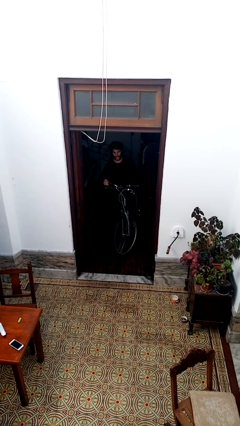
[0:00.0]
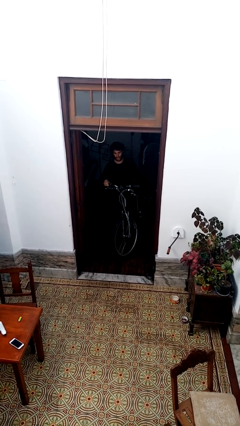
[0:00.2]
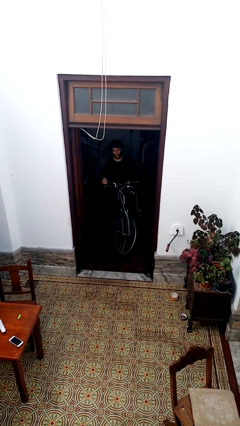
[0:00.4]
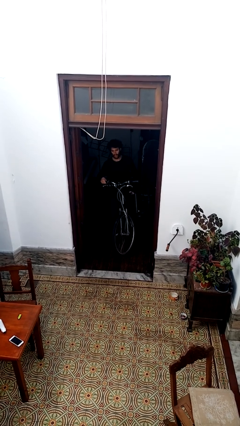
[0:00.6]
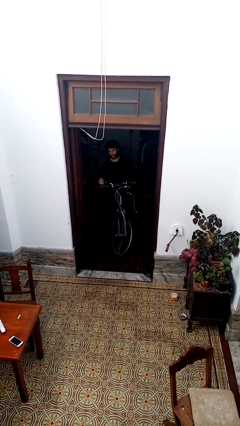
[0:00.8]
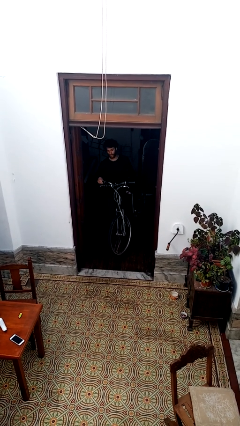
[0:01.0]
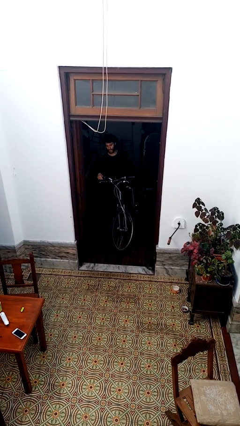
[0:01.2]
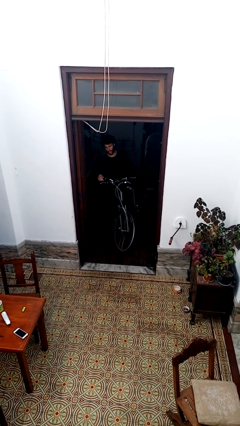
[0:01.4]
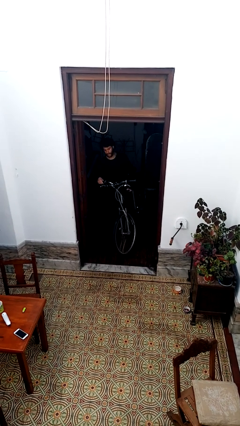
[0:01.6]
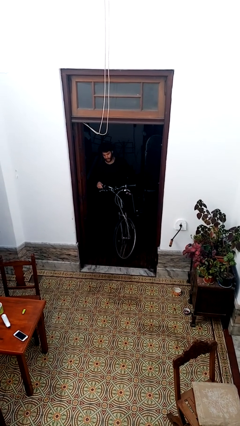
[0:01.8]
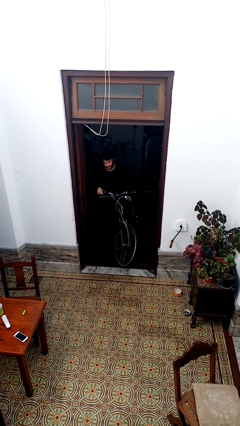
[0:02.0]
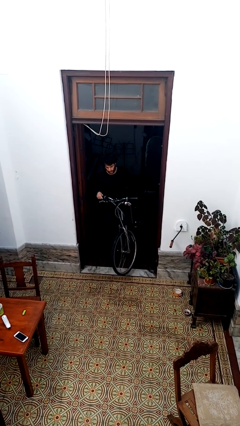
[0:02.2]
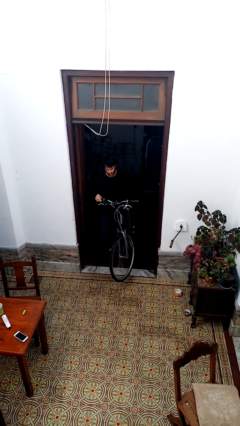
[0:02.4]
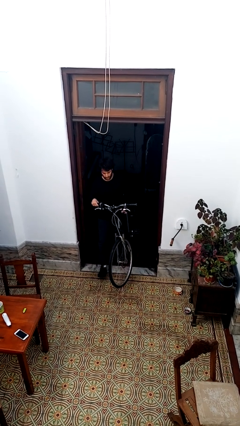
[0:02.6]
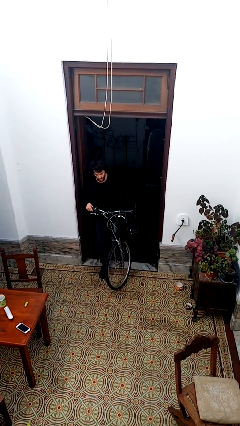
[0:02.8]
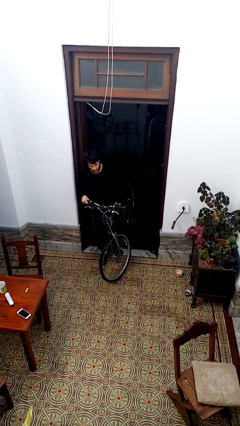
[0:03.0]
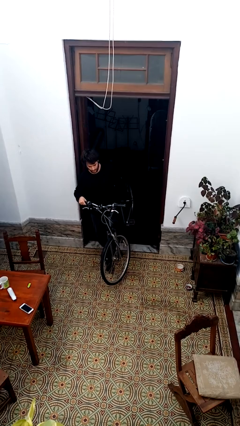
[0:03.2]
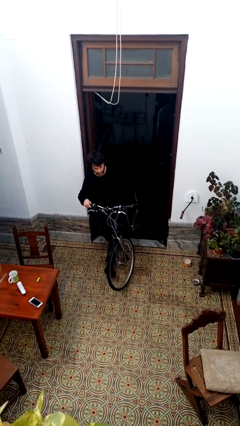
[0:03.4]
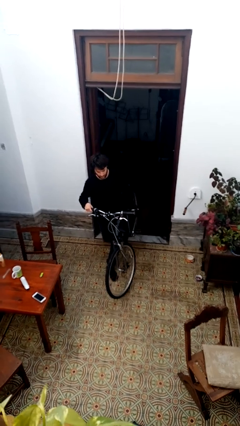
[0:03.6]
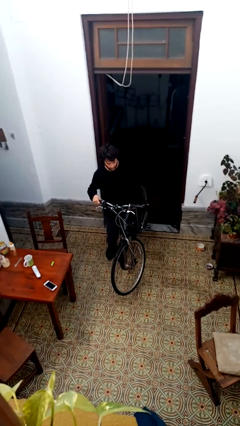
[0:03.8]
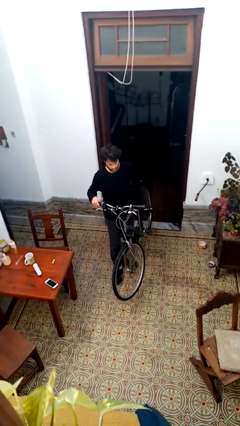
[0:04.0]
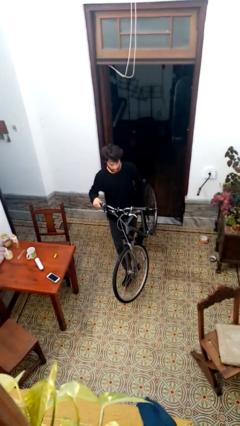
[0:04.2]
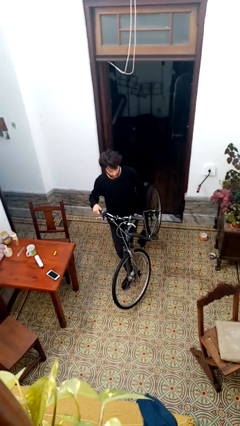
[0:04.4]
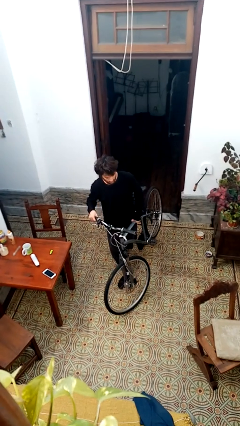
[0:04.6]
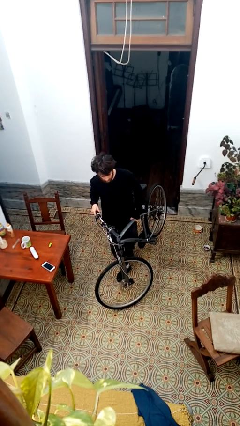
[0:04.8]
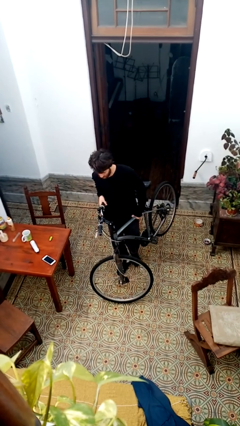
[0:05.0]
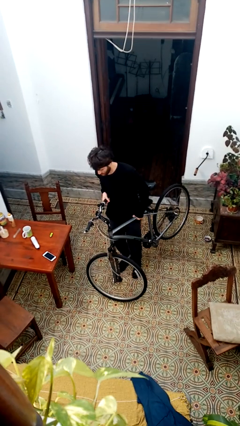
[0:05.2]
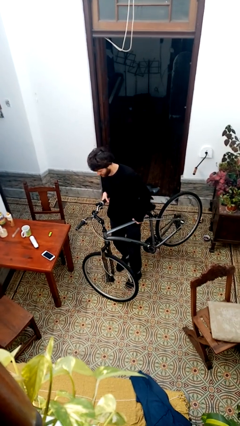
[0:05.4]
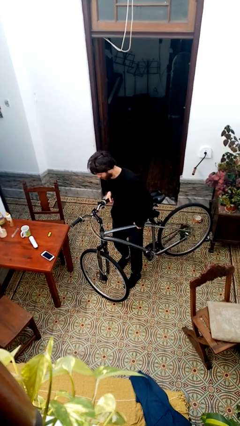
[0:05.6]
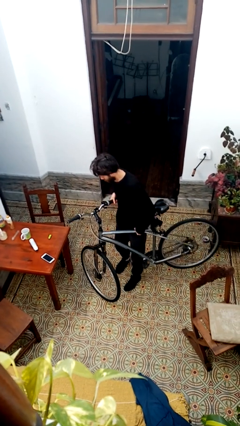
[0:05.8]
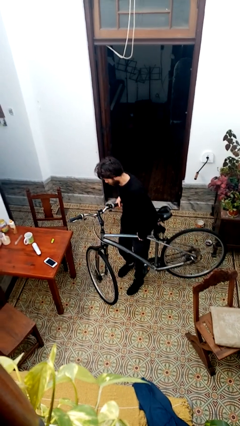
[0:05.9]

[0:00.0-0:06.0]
person carries bicycle

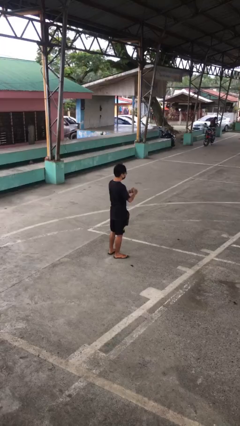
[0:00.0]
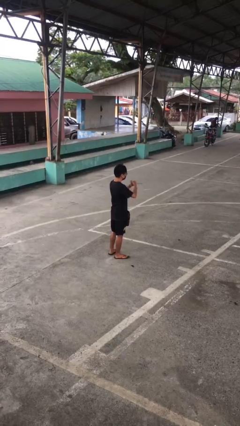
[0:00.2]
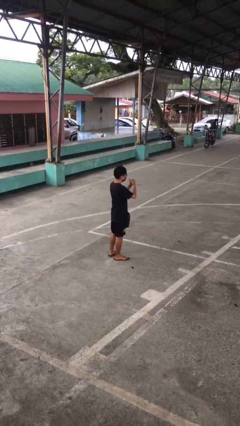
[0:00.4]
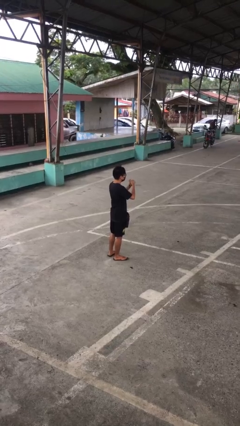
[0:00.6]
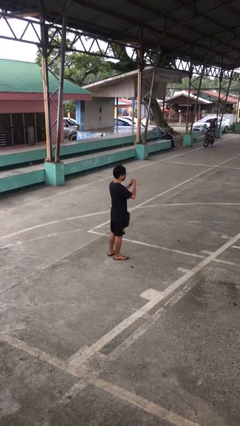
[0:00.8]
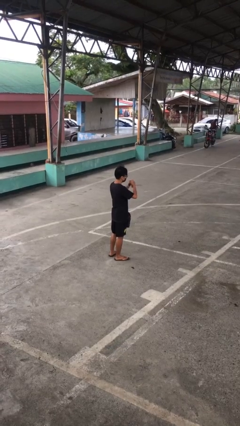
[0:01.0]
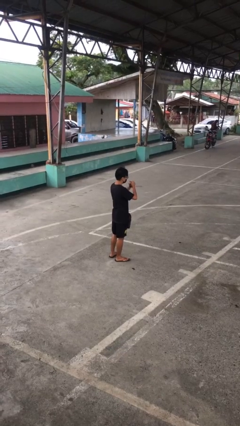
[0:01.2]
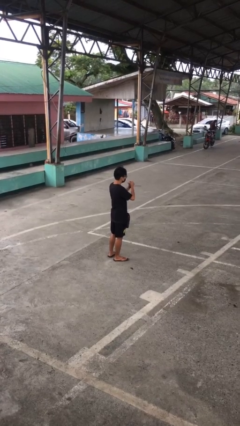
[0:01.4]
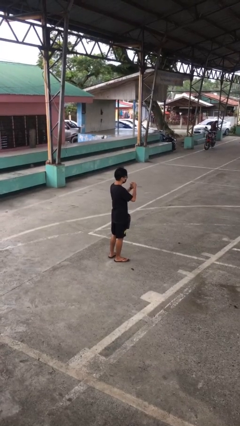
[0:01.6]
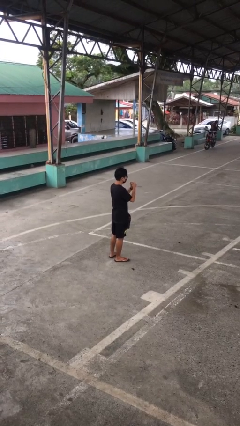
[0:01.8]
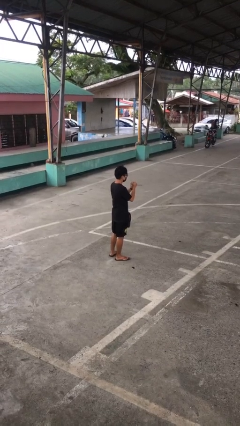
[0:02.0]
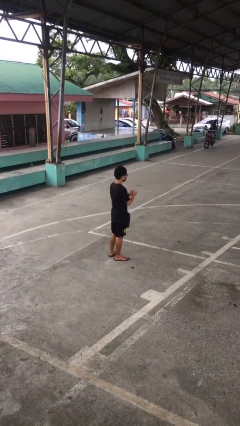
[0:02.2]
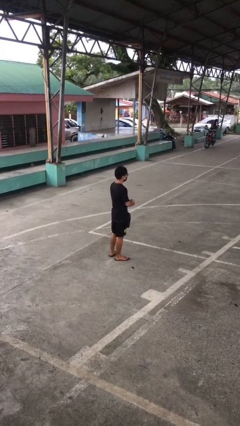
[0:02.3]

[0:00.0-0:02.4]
person cracks knuckles

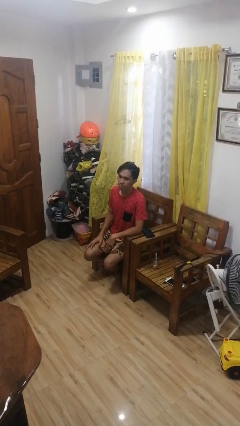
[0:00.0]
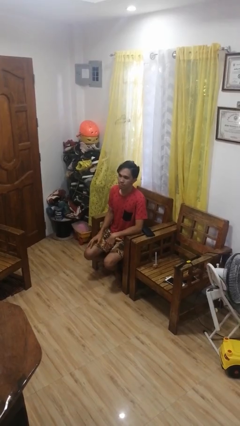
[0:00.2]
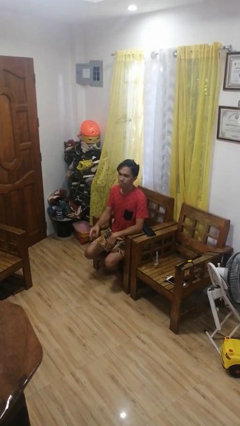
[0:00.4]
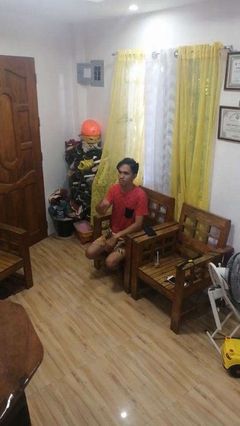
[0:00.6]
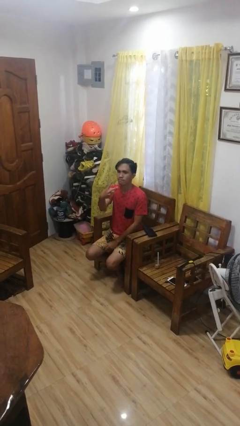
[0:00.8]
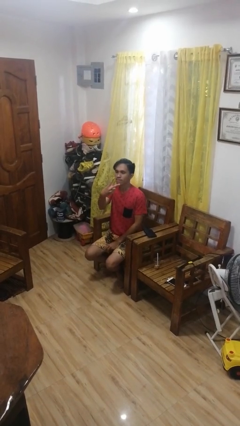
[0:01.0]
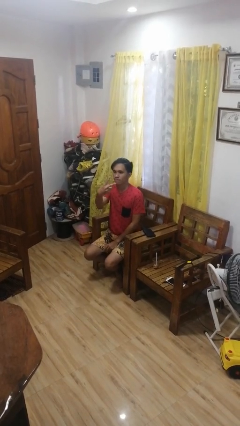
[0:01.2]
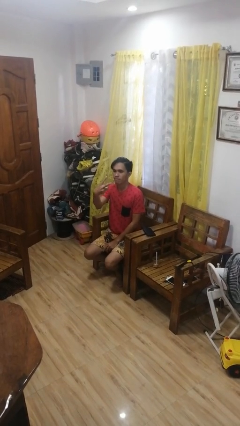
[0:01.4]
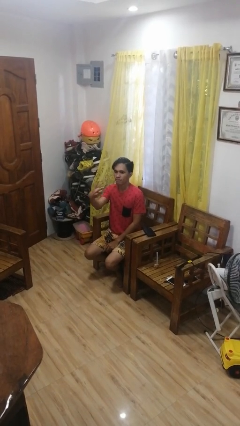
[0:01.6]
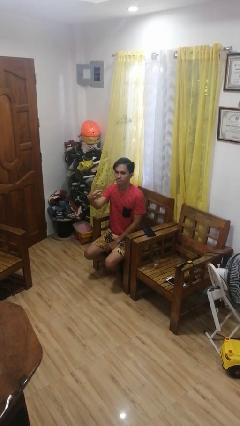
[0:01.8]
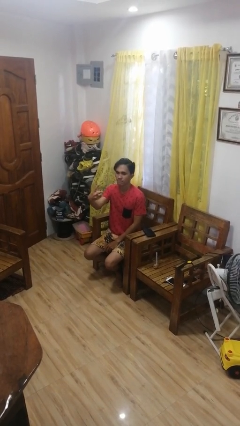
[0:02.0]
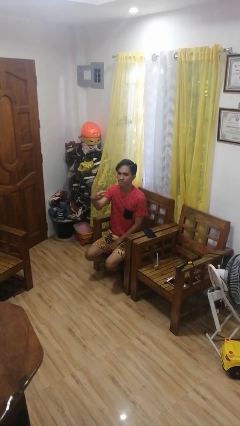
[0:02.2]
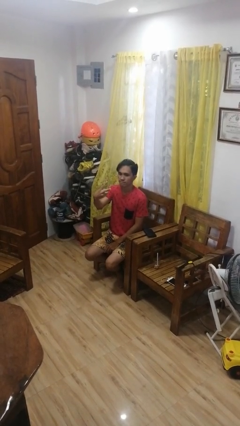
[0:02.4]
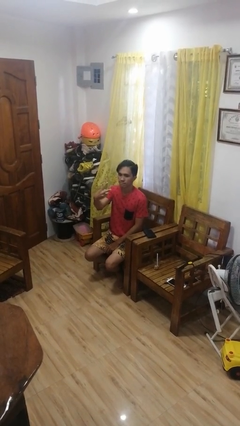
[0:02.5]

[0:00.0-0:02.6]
person gestures peace

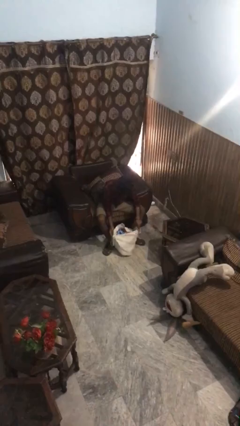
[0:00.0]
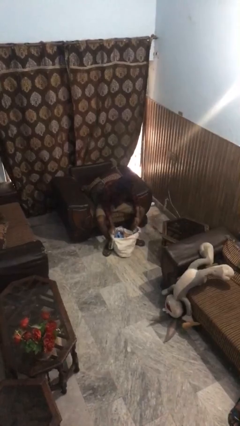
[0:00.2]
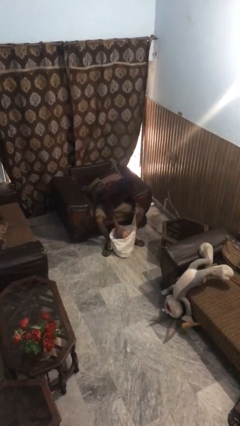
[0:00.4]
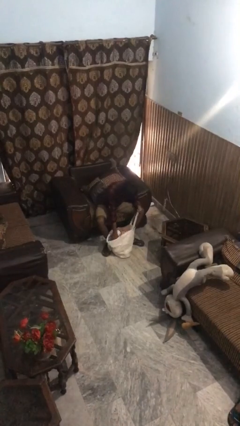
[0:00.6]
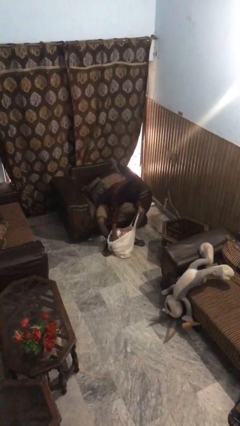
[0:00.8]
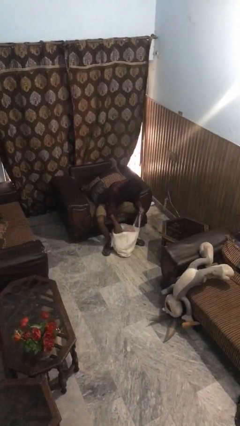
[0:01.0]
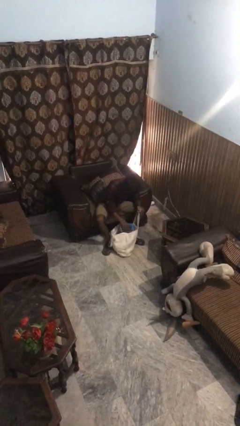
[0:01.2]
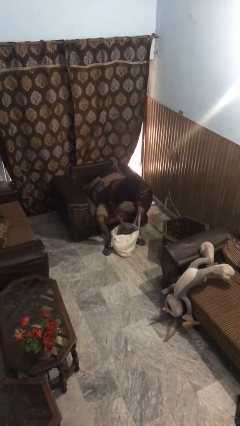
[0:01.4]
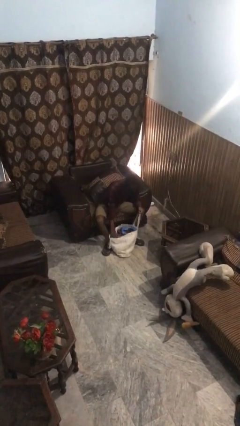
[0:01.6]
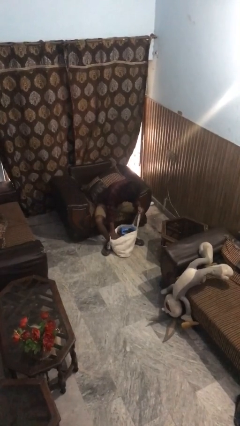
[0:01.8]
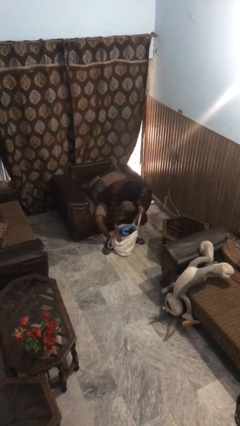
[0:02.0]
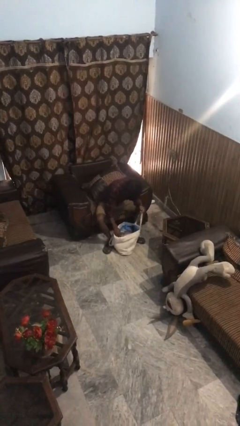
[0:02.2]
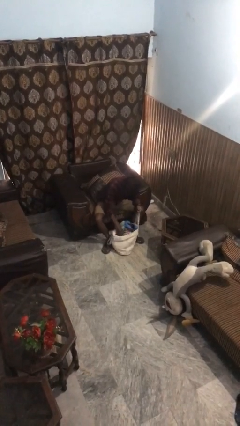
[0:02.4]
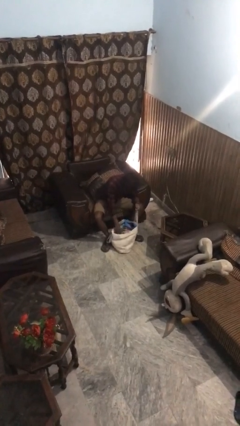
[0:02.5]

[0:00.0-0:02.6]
person searches in bag

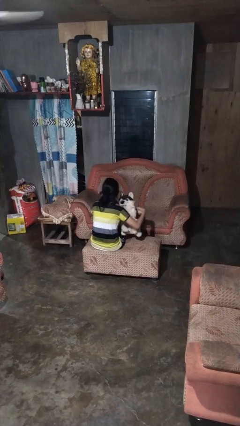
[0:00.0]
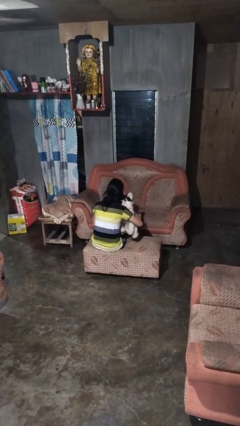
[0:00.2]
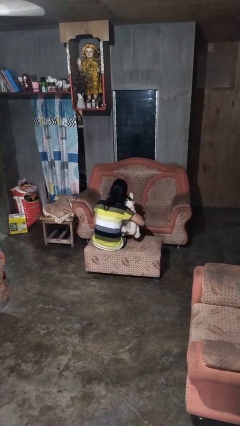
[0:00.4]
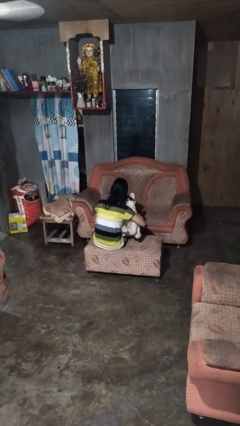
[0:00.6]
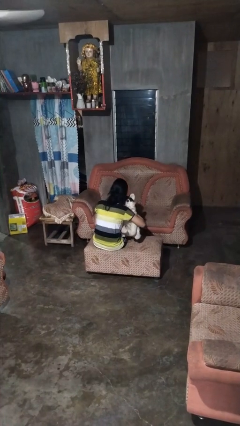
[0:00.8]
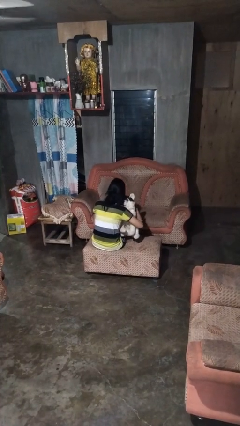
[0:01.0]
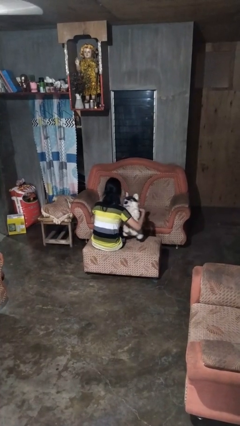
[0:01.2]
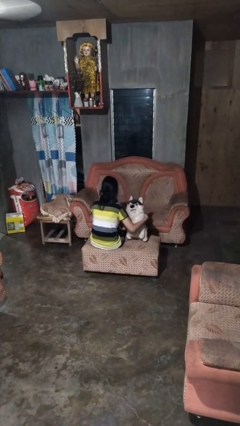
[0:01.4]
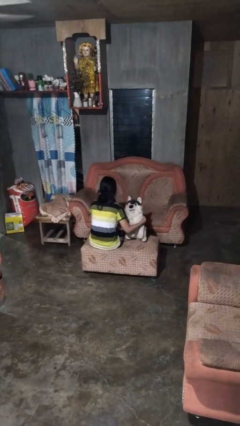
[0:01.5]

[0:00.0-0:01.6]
person hugs stuffed animal

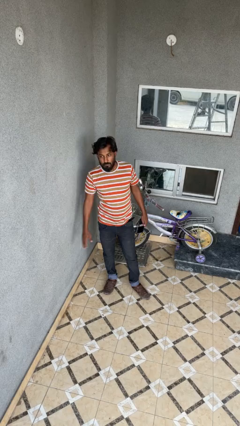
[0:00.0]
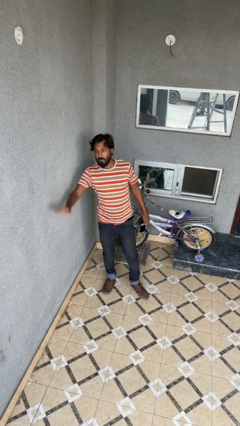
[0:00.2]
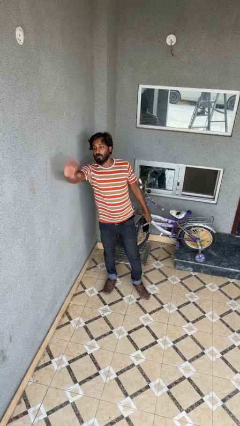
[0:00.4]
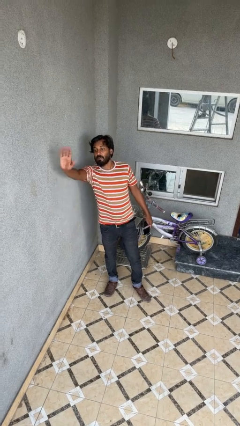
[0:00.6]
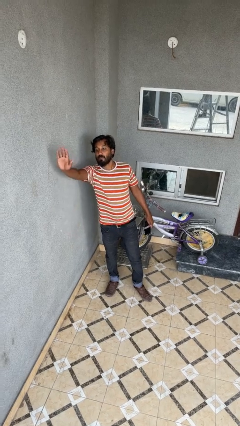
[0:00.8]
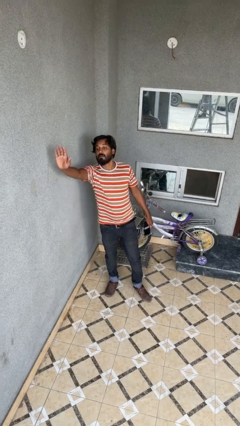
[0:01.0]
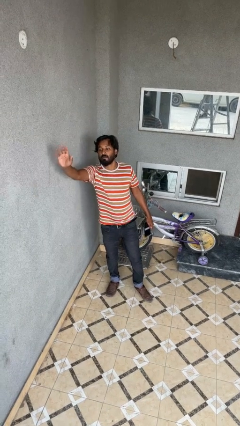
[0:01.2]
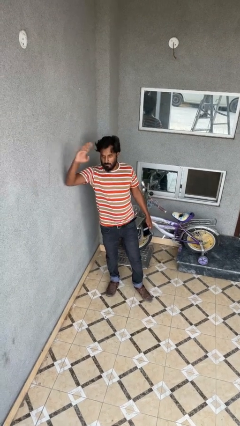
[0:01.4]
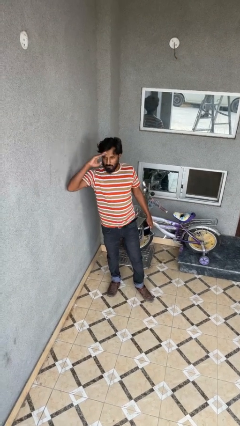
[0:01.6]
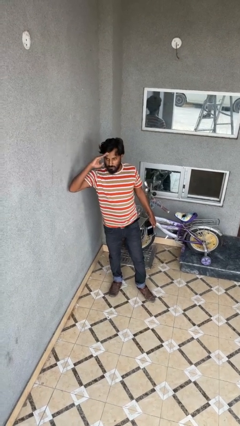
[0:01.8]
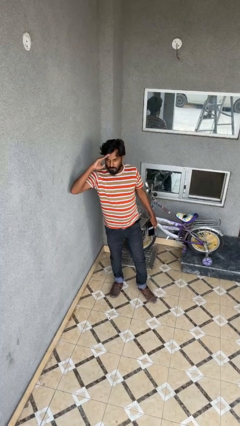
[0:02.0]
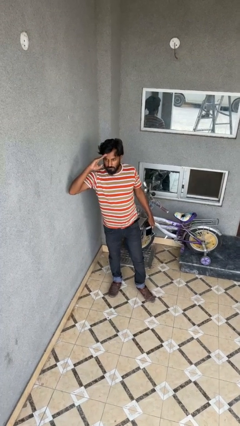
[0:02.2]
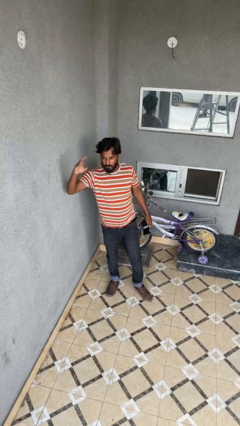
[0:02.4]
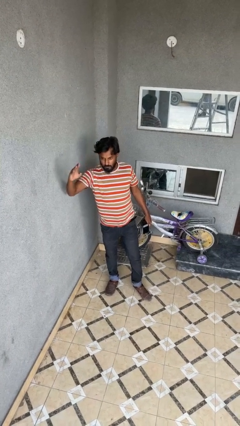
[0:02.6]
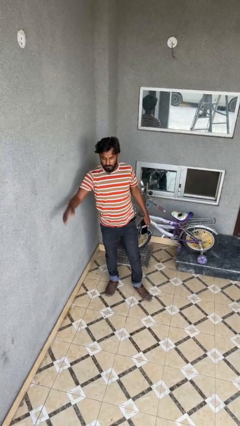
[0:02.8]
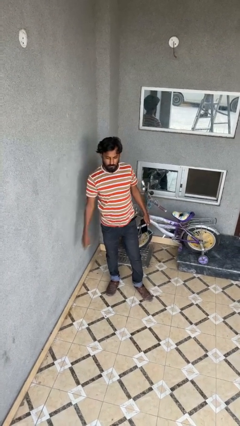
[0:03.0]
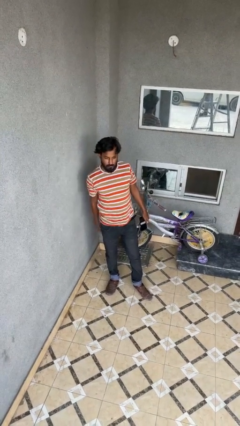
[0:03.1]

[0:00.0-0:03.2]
person waves at person
